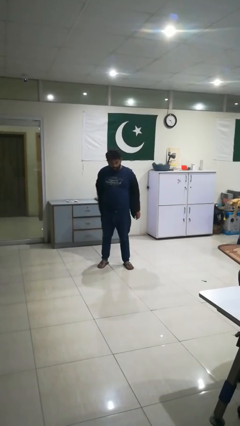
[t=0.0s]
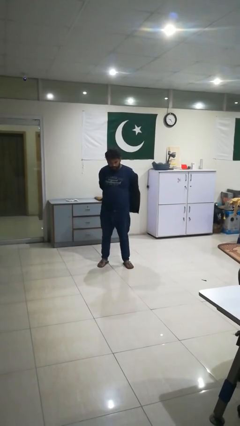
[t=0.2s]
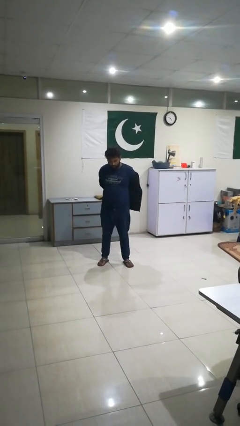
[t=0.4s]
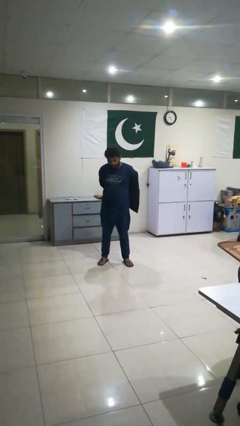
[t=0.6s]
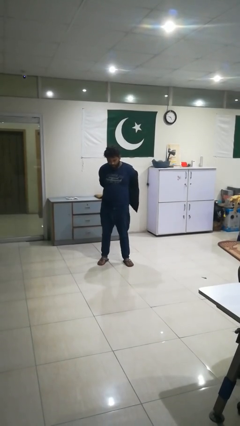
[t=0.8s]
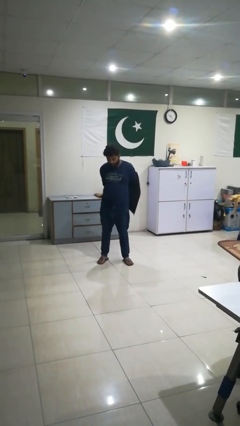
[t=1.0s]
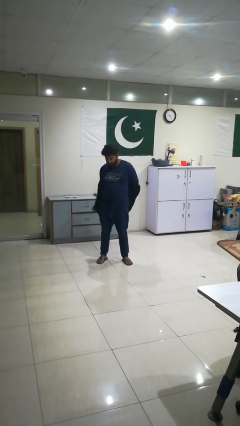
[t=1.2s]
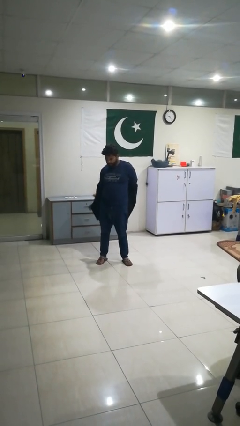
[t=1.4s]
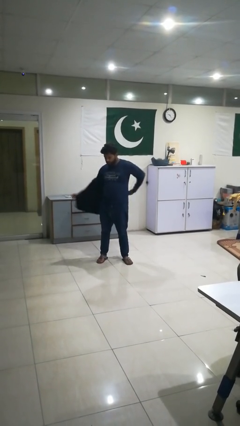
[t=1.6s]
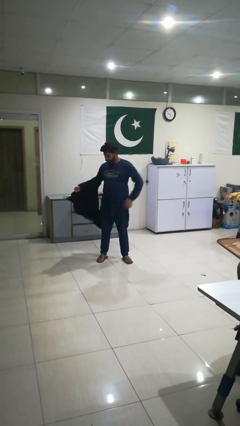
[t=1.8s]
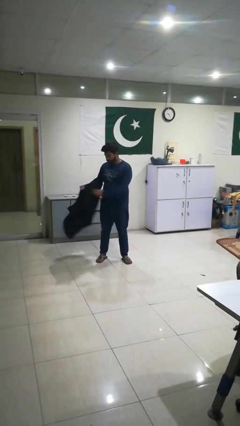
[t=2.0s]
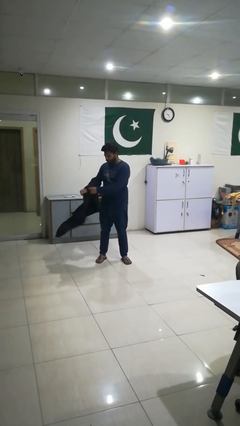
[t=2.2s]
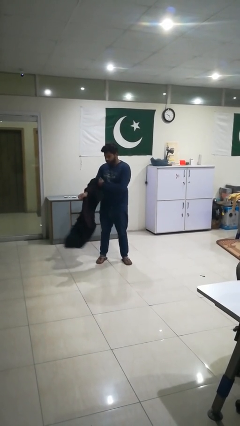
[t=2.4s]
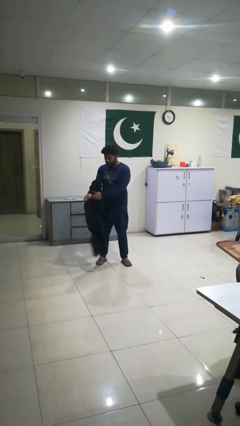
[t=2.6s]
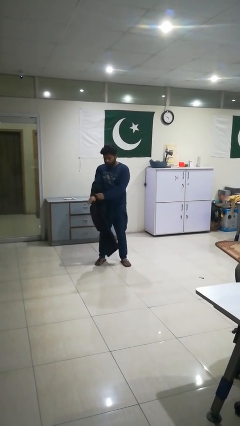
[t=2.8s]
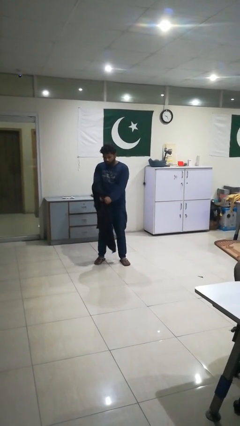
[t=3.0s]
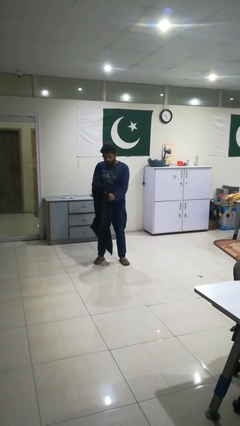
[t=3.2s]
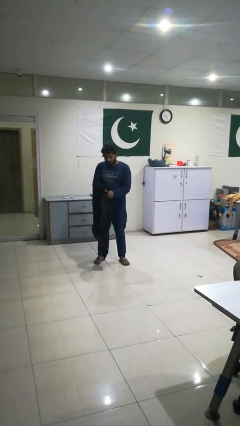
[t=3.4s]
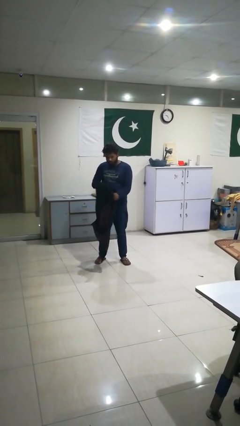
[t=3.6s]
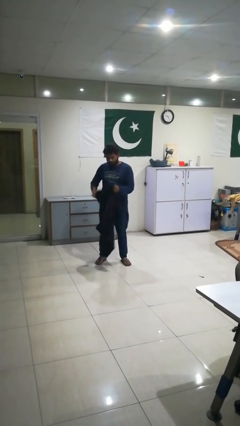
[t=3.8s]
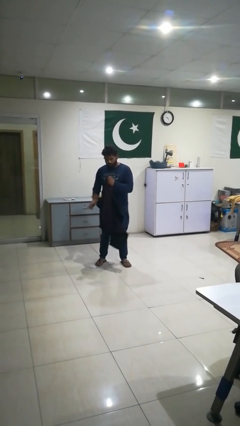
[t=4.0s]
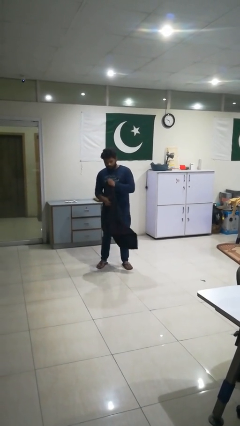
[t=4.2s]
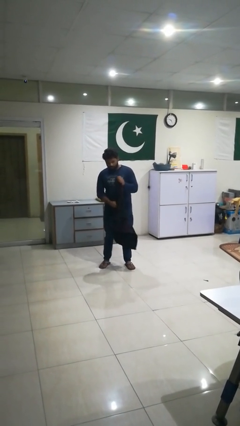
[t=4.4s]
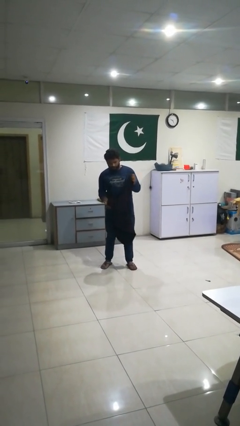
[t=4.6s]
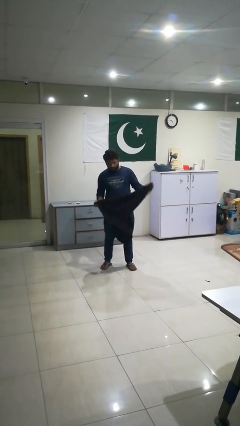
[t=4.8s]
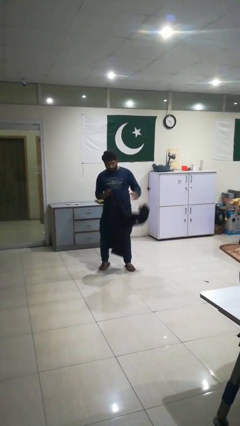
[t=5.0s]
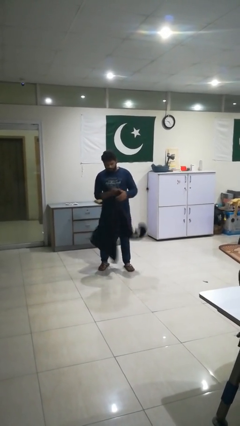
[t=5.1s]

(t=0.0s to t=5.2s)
person takes off jacket

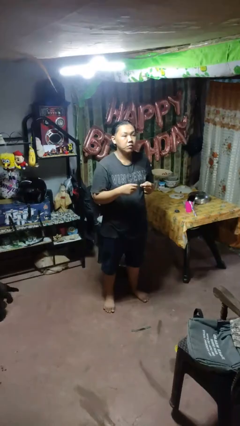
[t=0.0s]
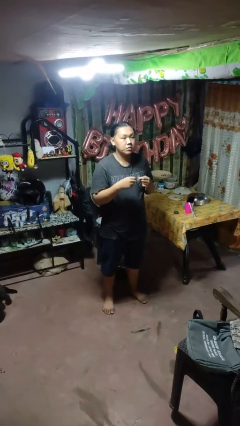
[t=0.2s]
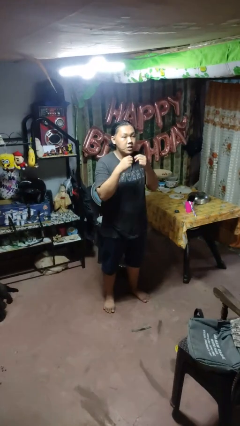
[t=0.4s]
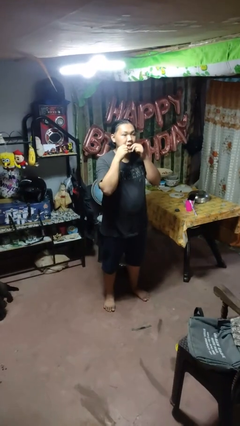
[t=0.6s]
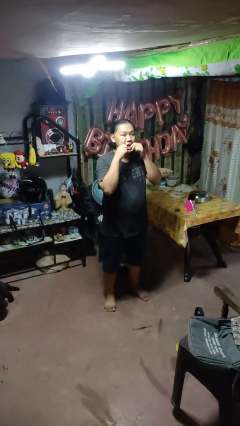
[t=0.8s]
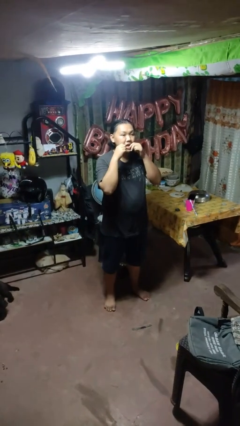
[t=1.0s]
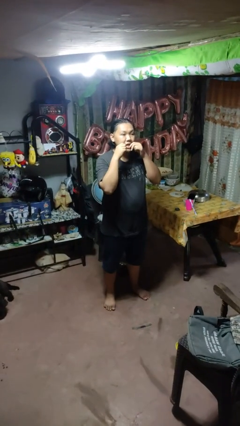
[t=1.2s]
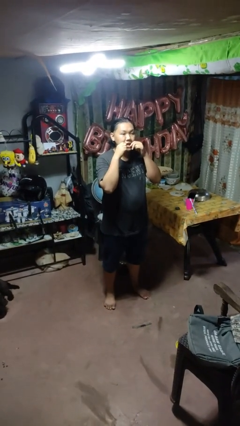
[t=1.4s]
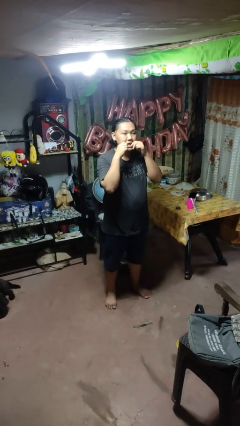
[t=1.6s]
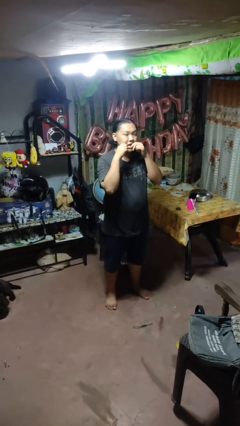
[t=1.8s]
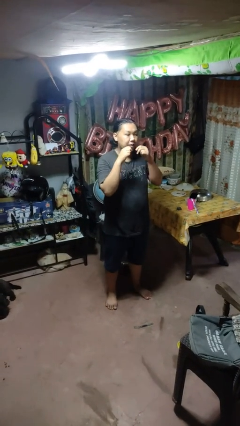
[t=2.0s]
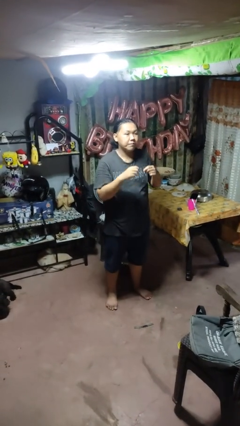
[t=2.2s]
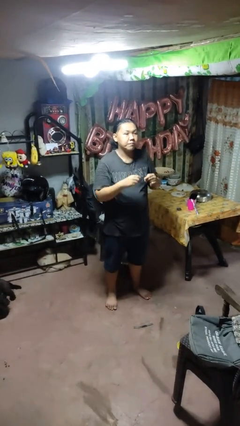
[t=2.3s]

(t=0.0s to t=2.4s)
person flosses

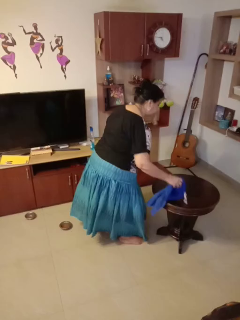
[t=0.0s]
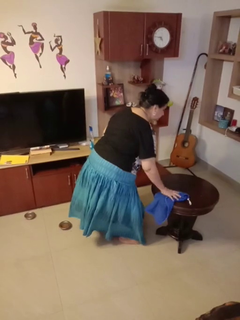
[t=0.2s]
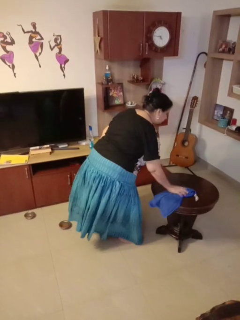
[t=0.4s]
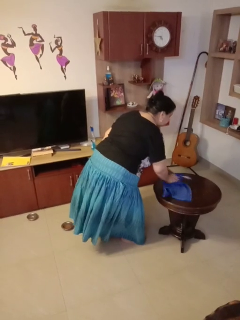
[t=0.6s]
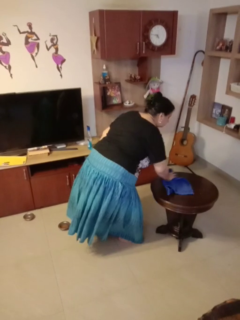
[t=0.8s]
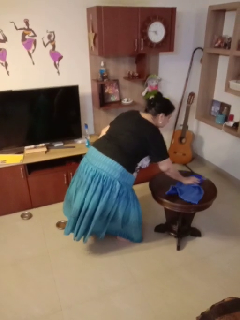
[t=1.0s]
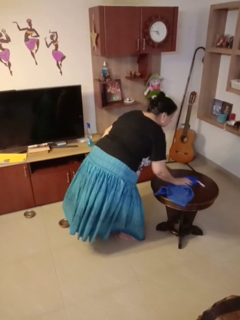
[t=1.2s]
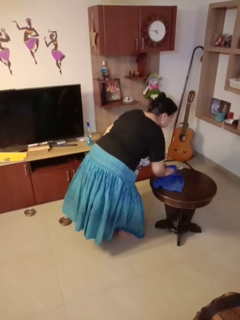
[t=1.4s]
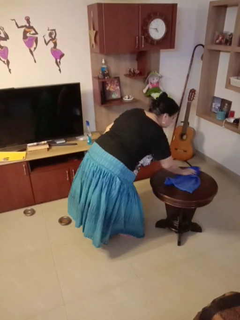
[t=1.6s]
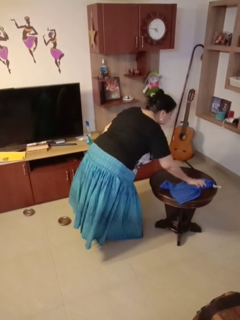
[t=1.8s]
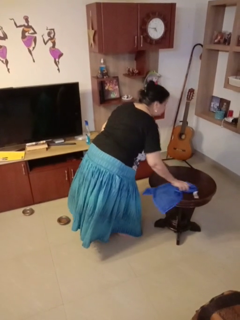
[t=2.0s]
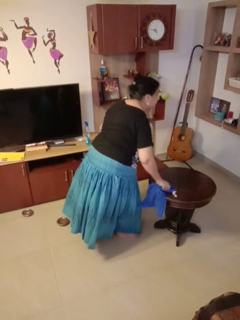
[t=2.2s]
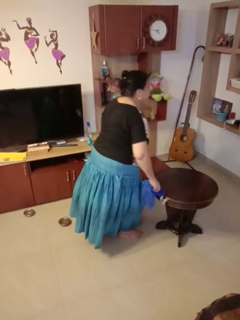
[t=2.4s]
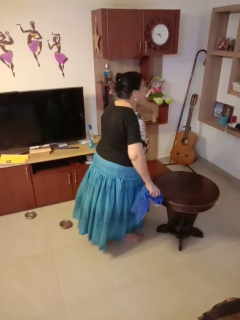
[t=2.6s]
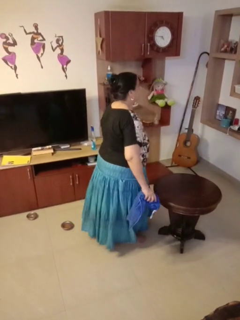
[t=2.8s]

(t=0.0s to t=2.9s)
person cleans table with rag

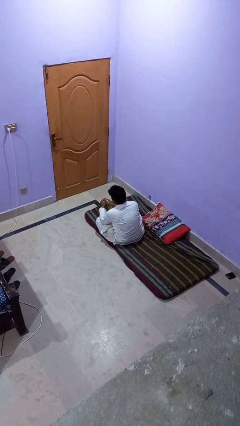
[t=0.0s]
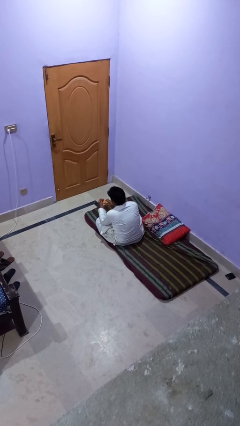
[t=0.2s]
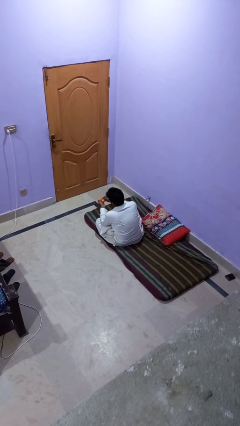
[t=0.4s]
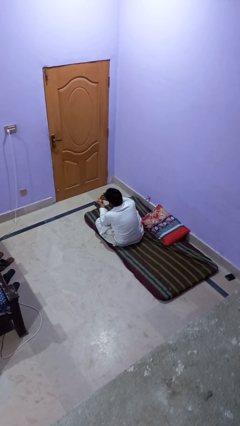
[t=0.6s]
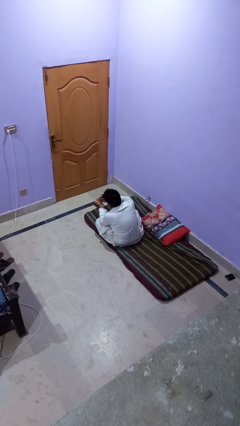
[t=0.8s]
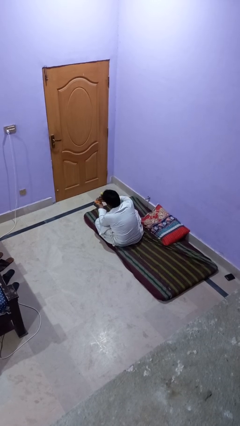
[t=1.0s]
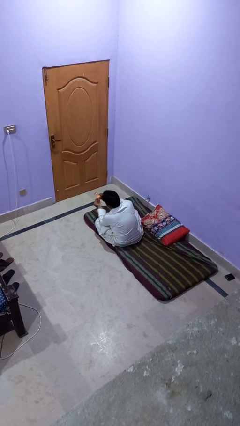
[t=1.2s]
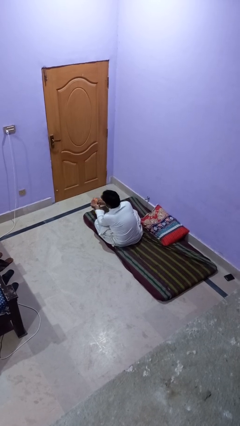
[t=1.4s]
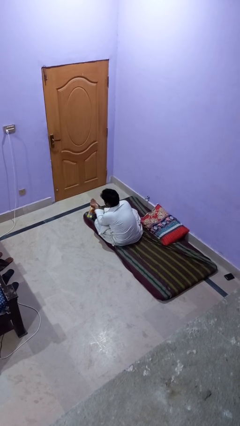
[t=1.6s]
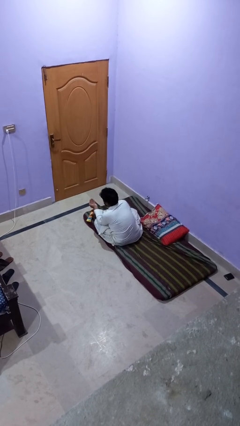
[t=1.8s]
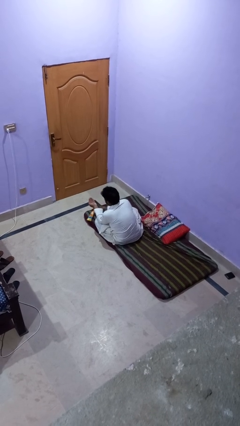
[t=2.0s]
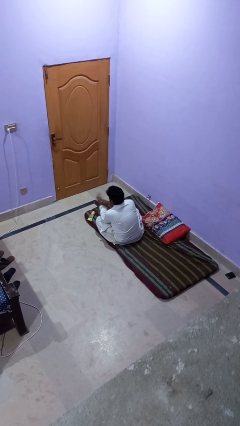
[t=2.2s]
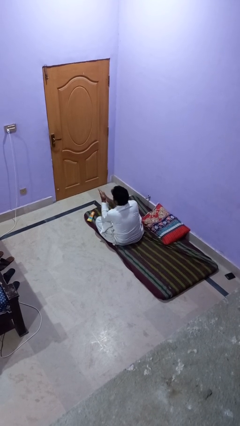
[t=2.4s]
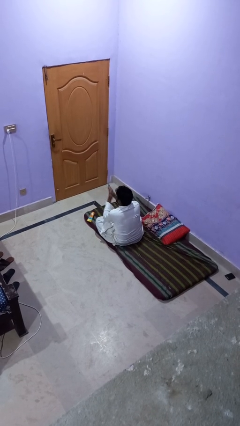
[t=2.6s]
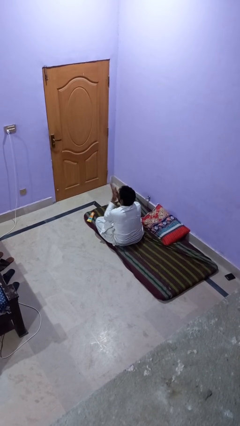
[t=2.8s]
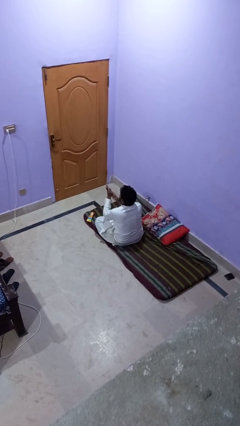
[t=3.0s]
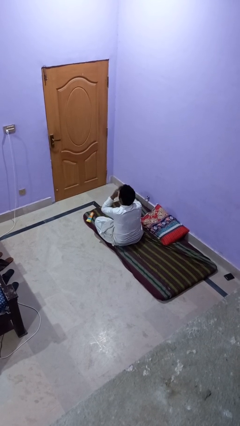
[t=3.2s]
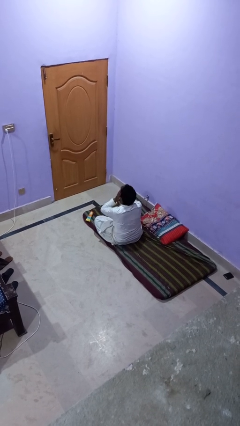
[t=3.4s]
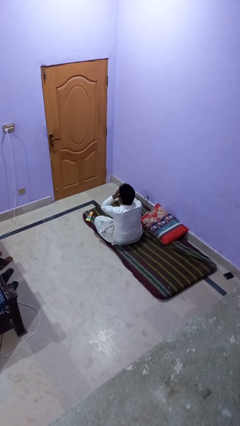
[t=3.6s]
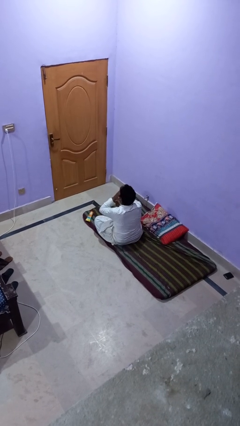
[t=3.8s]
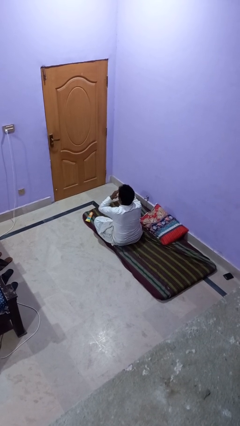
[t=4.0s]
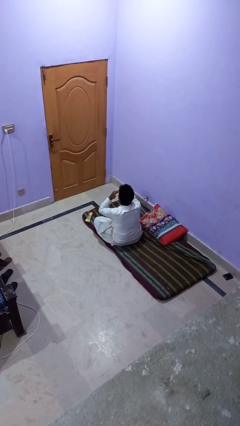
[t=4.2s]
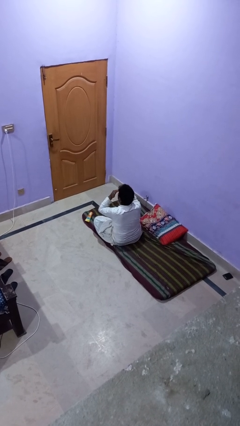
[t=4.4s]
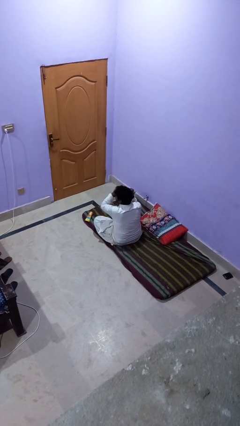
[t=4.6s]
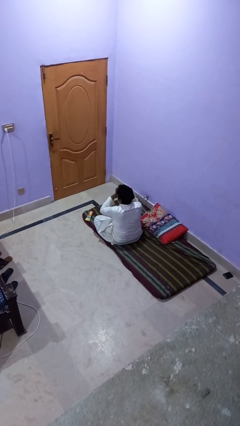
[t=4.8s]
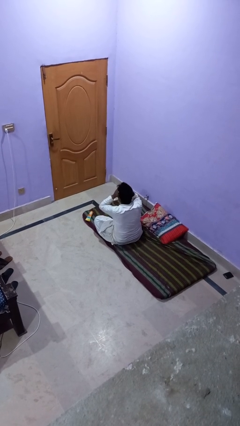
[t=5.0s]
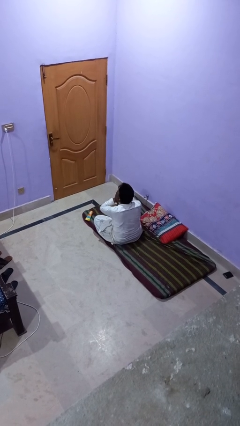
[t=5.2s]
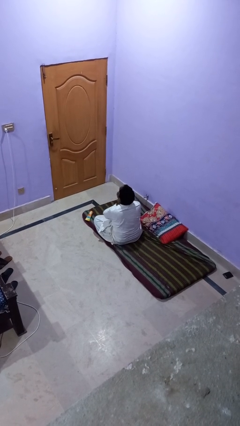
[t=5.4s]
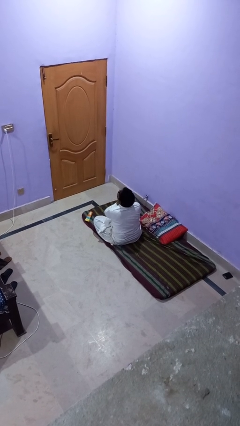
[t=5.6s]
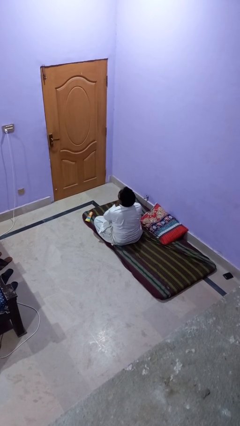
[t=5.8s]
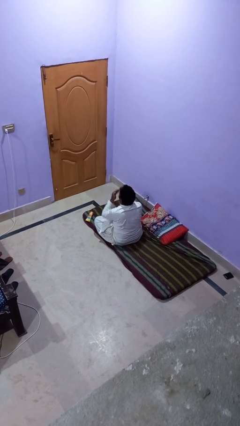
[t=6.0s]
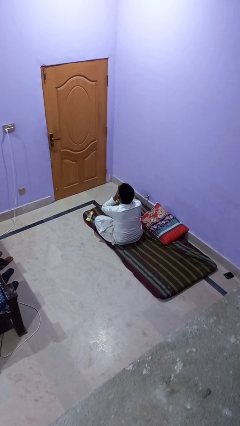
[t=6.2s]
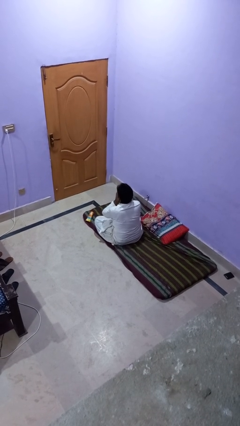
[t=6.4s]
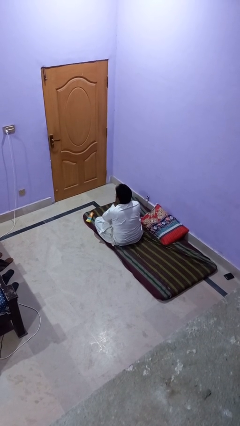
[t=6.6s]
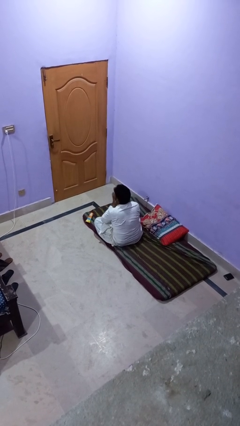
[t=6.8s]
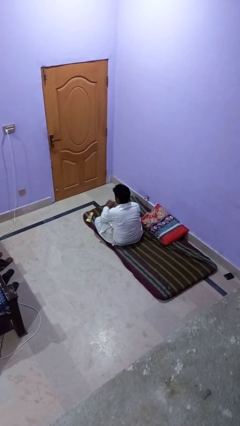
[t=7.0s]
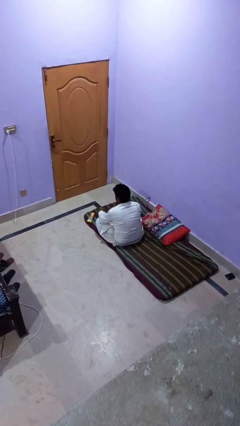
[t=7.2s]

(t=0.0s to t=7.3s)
person applies sunscreen

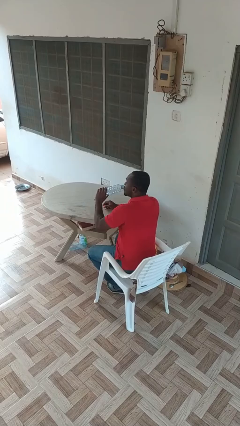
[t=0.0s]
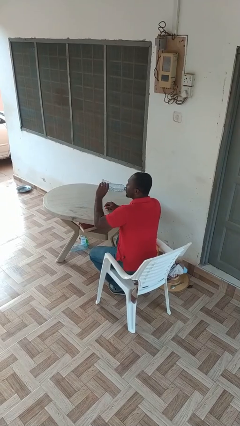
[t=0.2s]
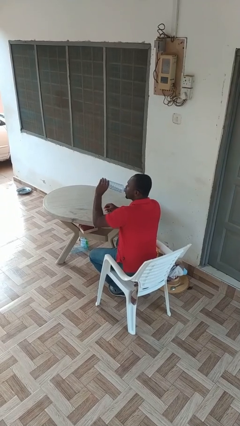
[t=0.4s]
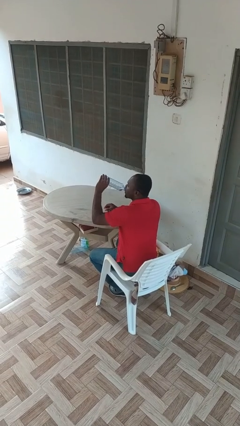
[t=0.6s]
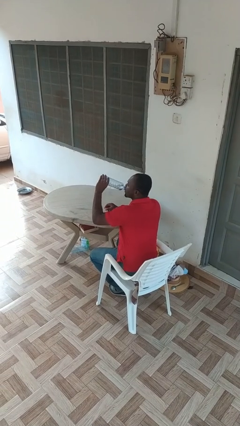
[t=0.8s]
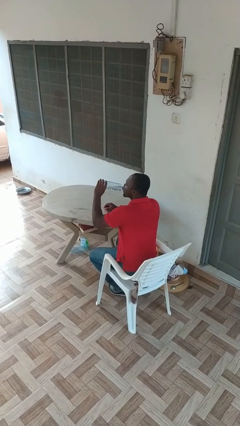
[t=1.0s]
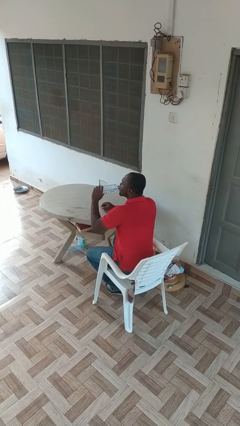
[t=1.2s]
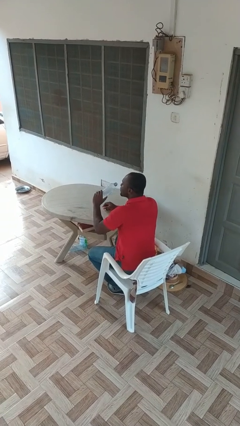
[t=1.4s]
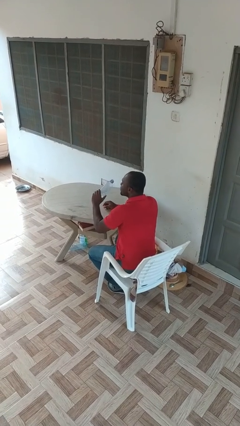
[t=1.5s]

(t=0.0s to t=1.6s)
person drinks from bottle
